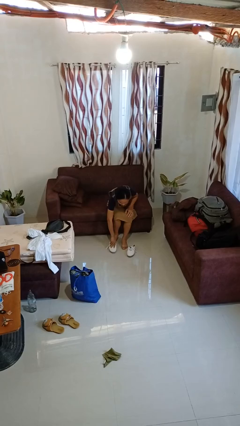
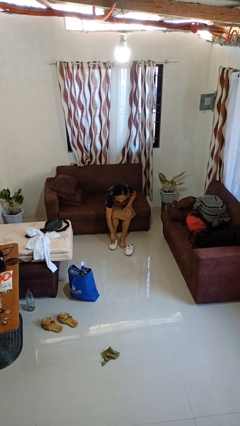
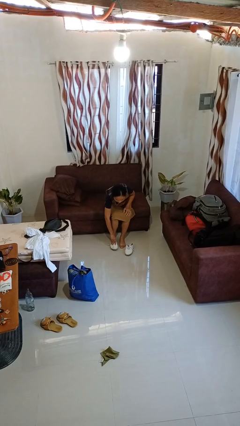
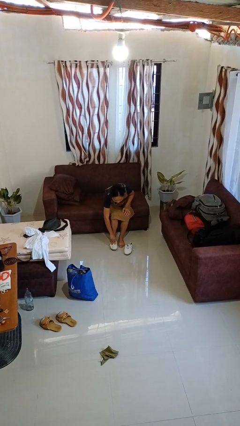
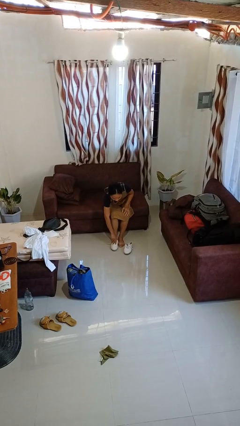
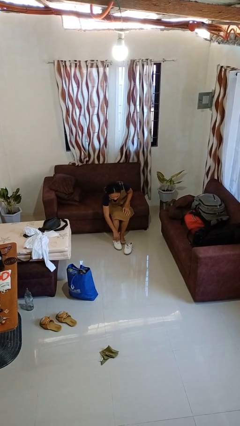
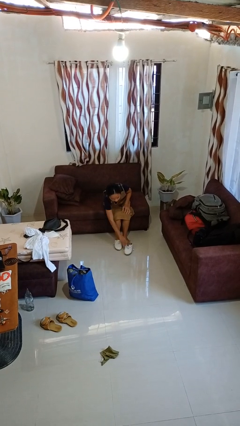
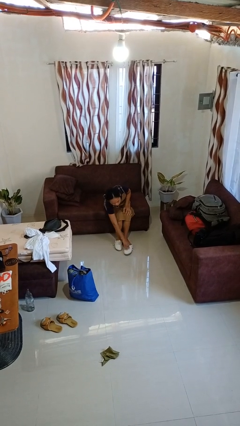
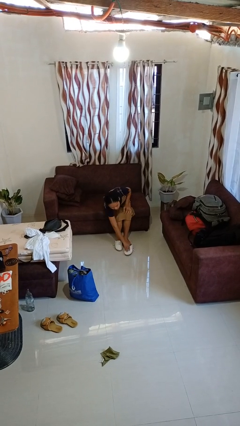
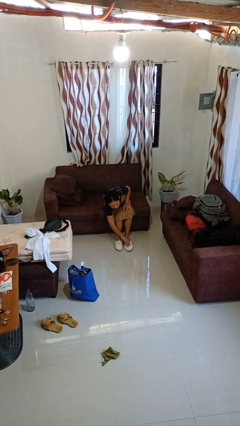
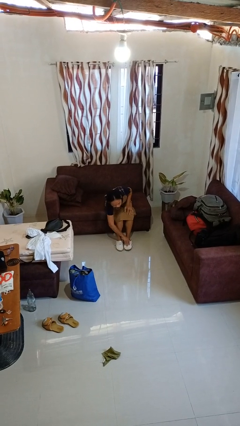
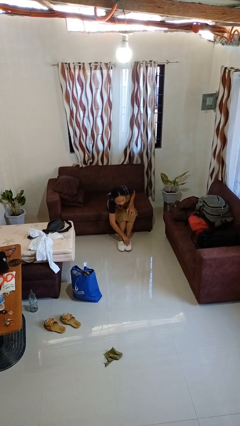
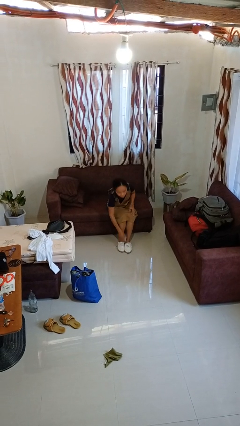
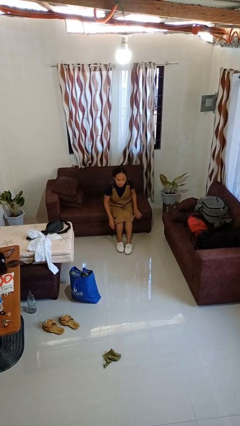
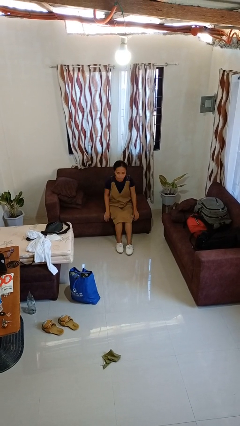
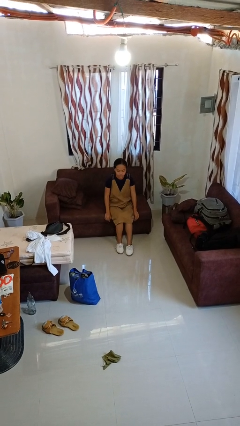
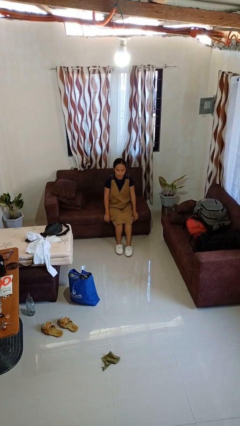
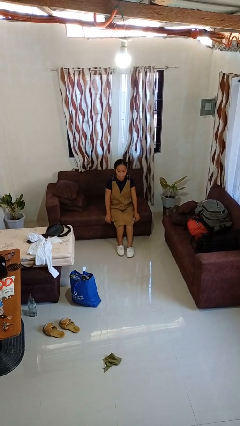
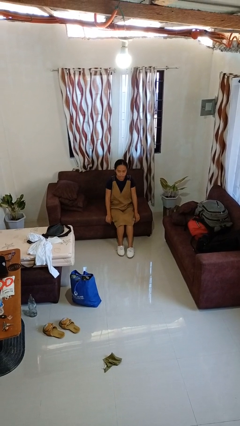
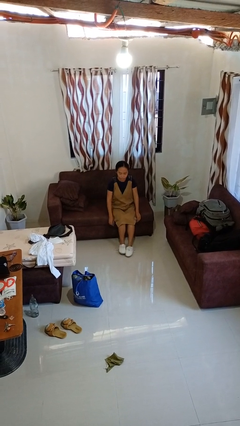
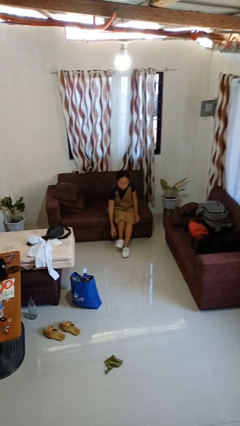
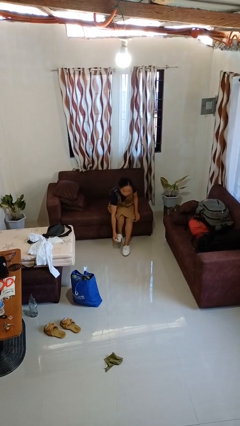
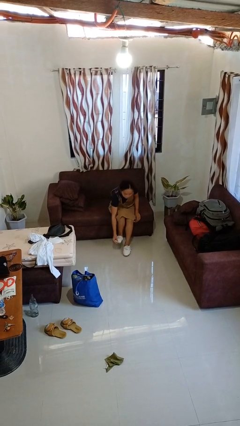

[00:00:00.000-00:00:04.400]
person puts on shoes

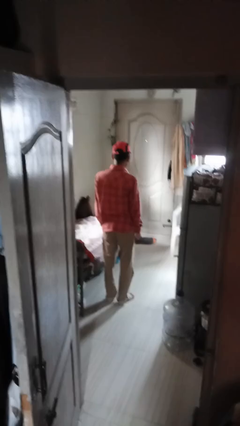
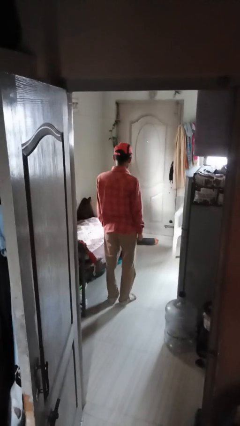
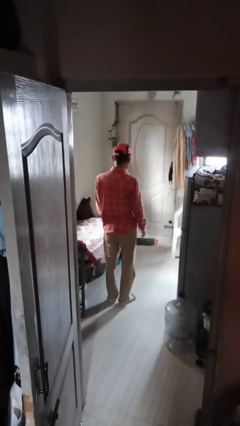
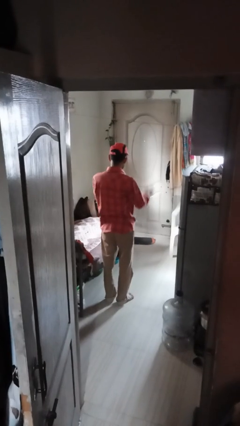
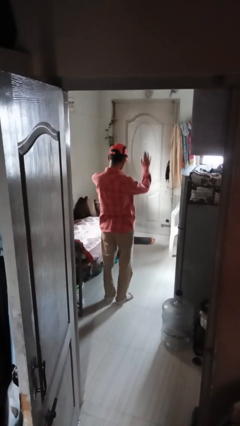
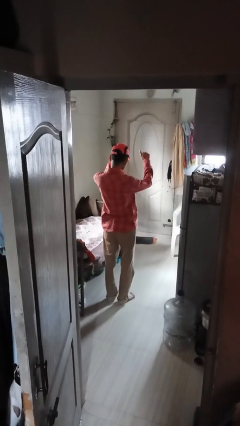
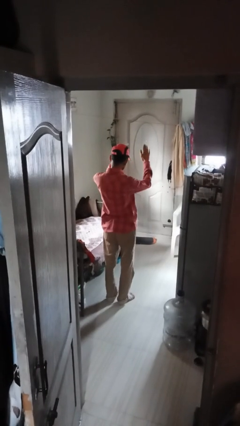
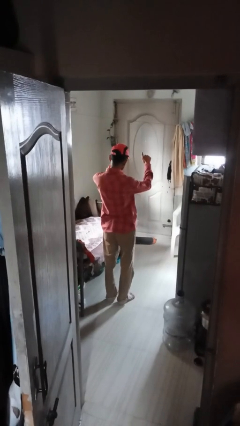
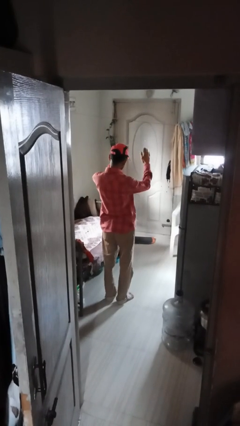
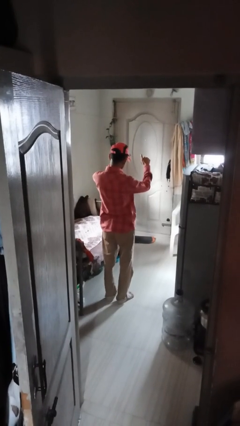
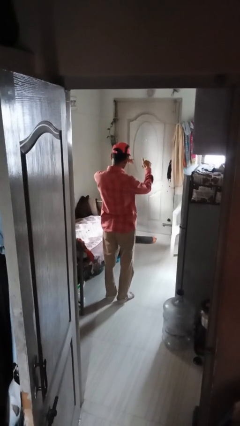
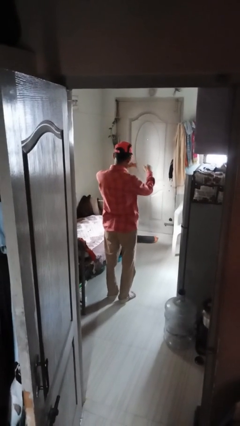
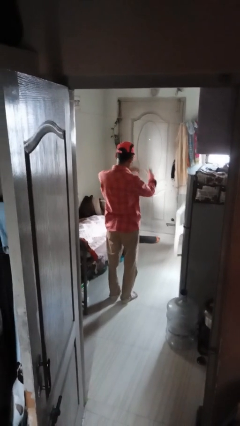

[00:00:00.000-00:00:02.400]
person gestures come here

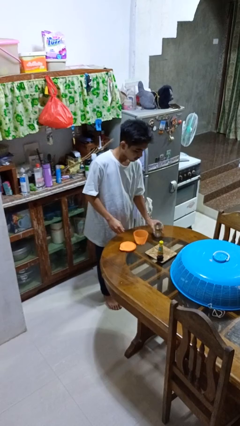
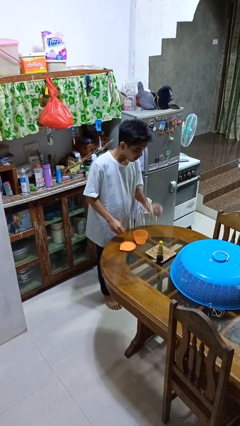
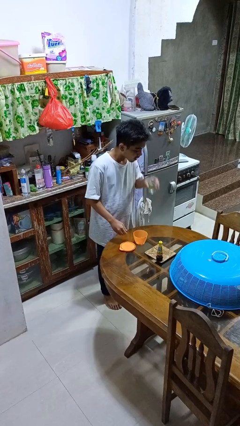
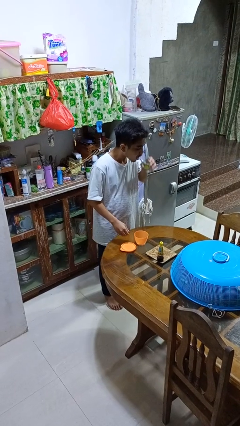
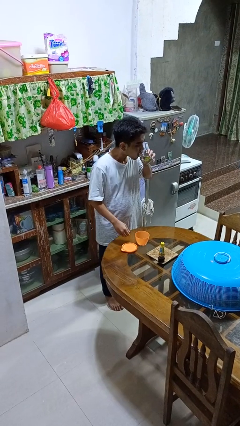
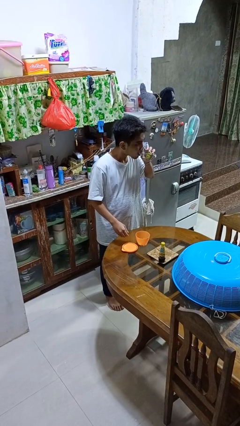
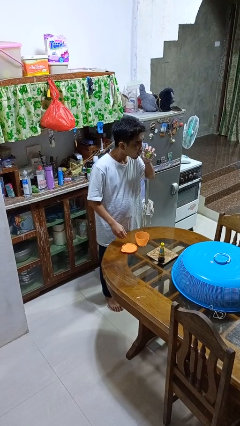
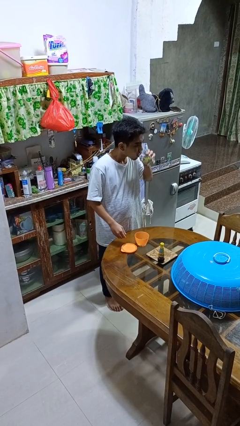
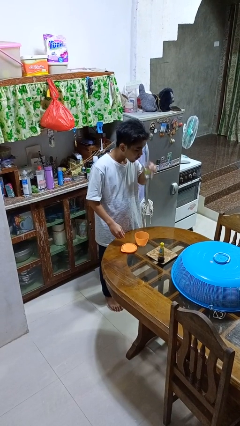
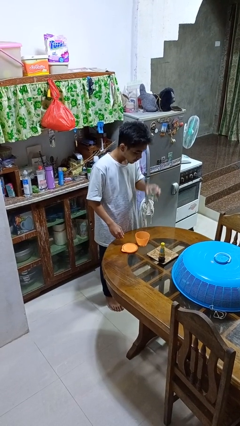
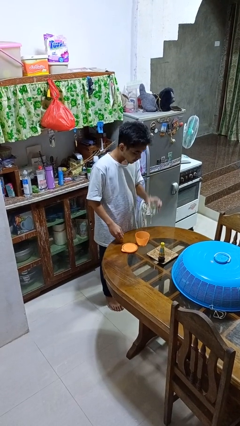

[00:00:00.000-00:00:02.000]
person drinks from cup

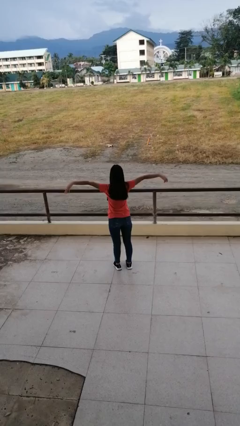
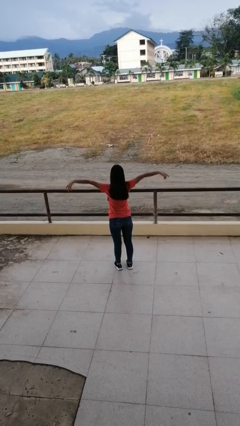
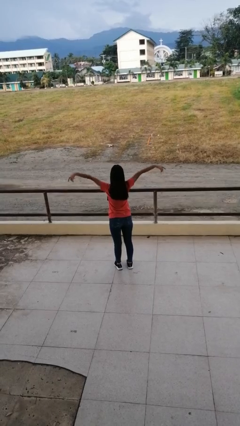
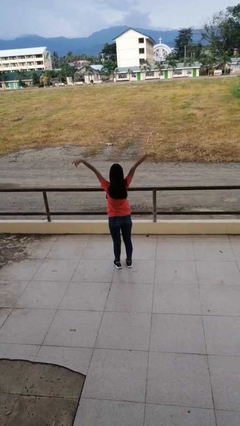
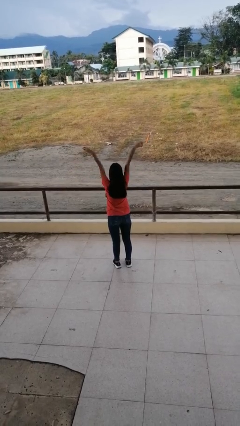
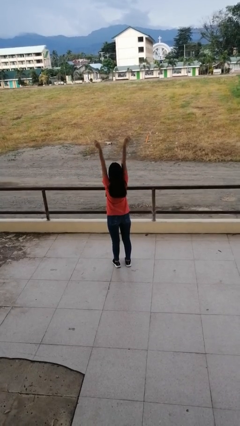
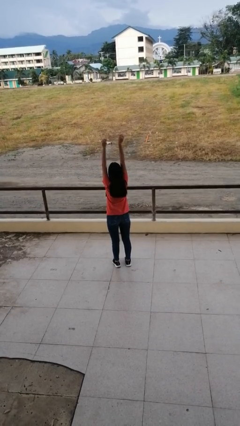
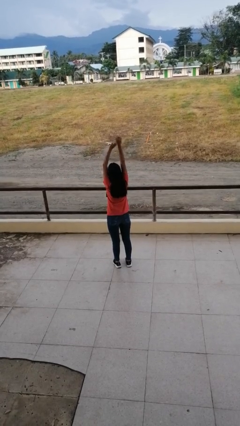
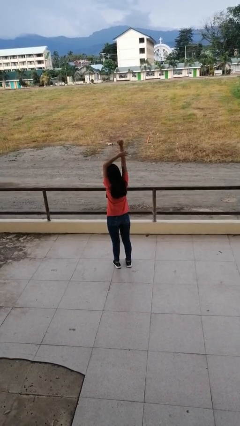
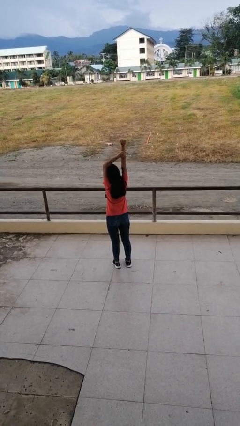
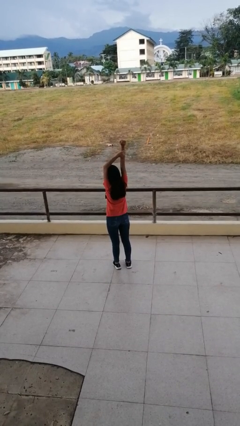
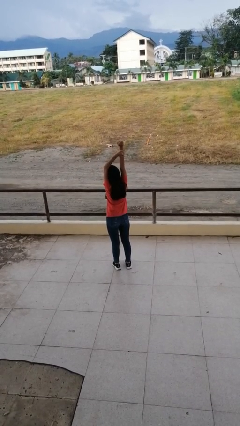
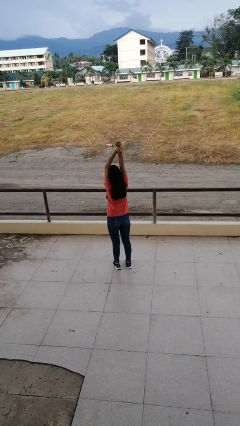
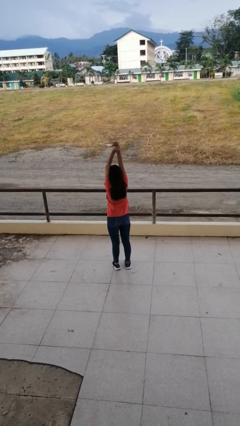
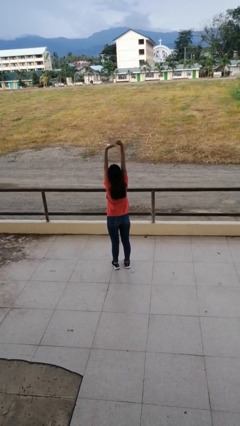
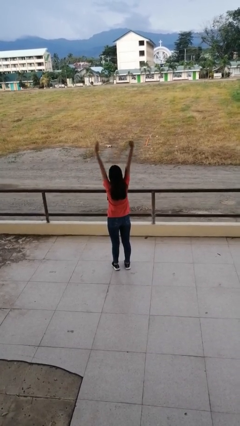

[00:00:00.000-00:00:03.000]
person stretches arms over head

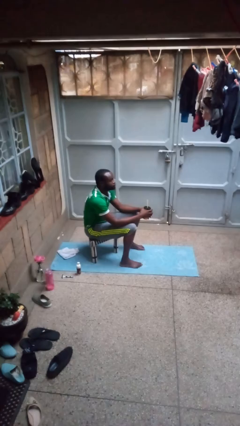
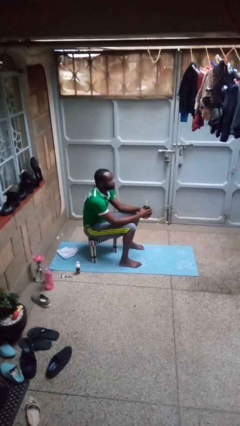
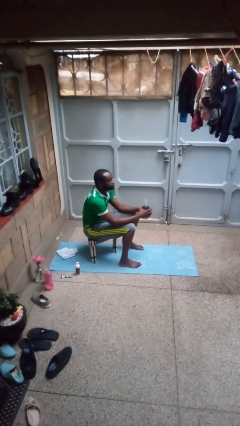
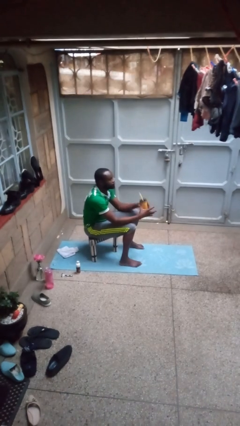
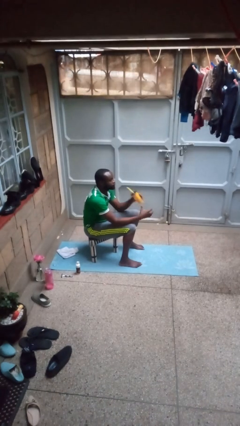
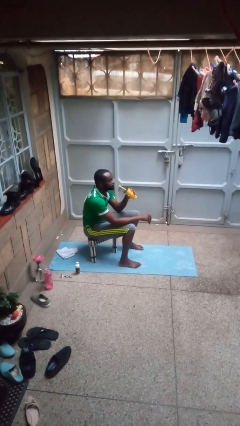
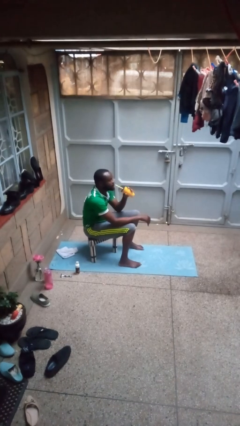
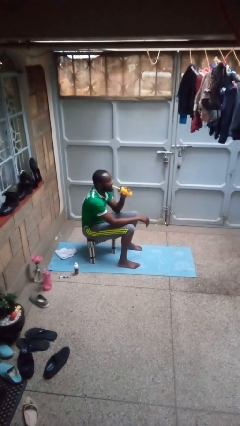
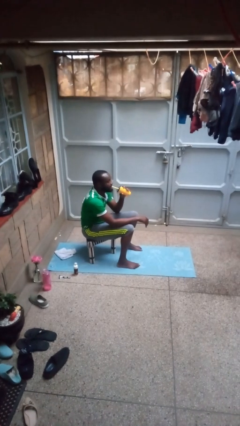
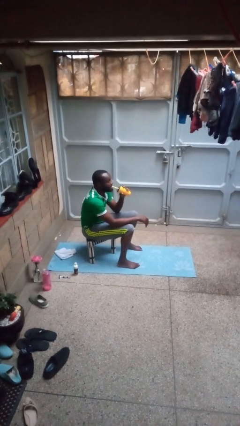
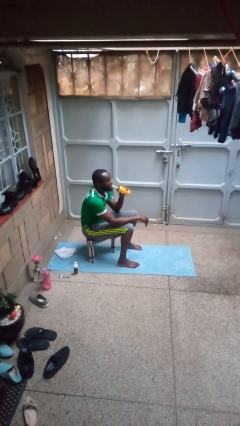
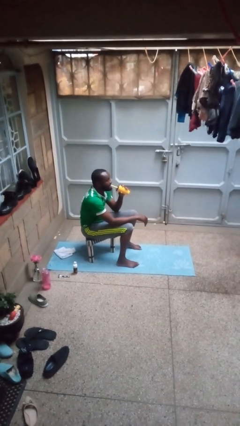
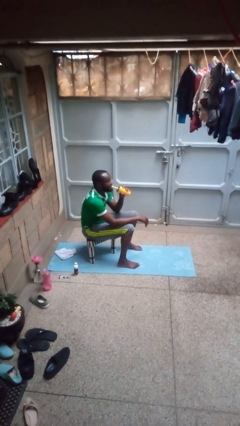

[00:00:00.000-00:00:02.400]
person drinks from straw

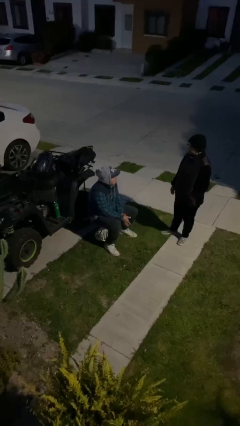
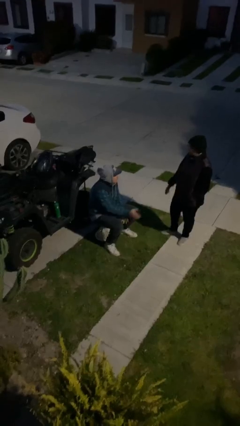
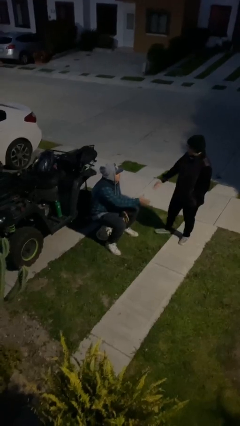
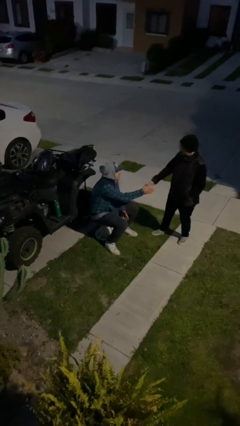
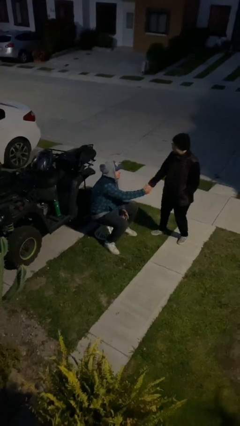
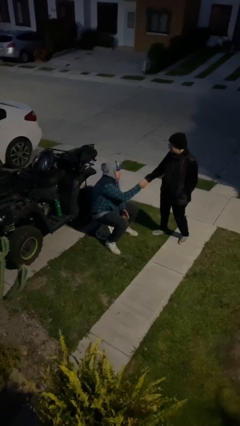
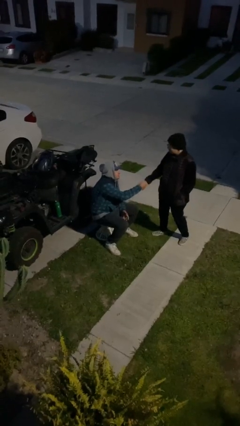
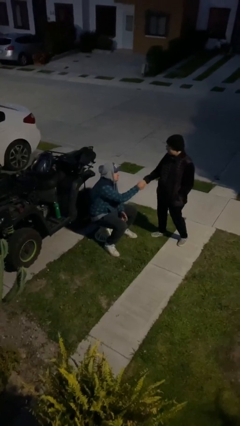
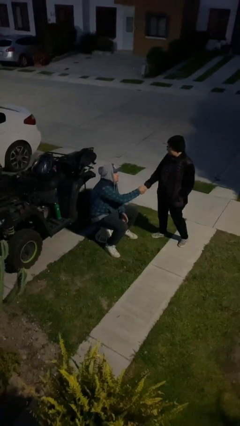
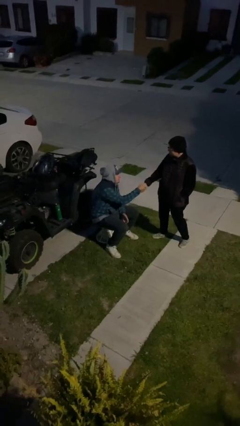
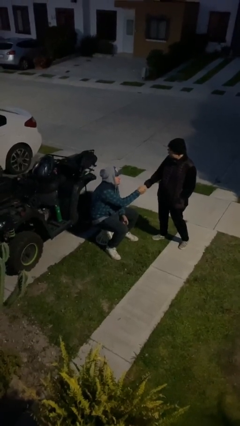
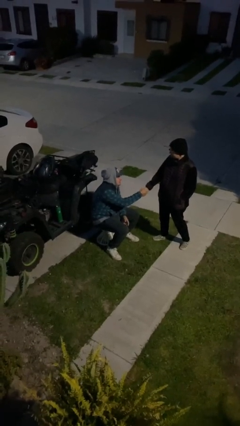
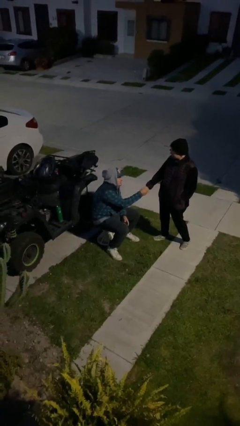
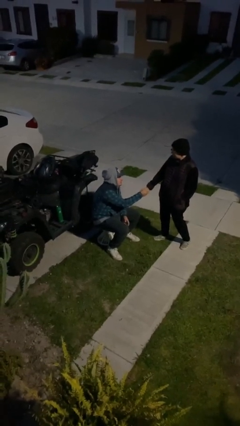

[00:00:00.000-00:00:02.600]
person shakes hand

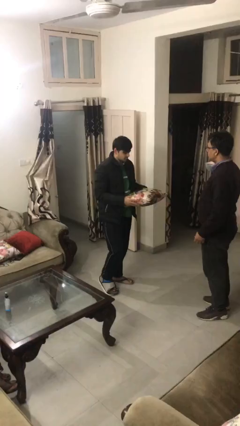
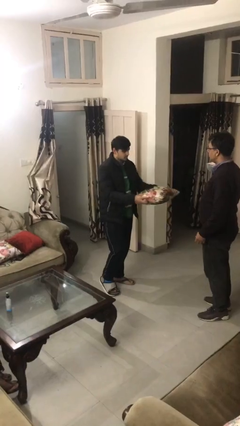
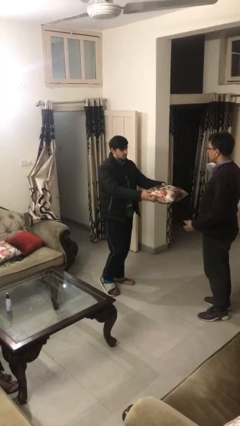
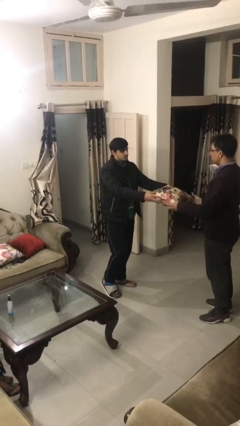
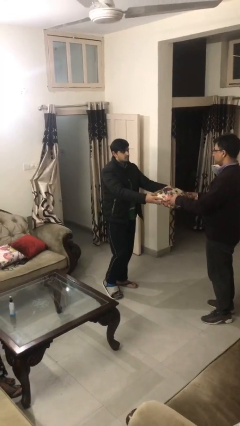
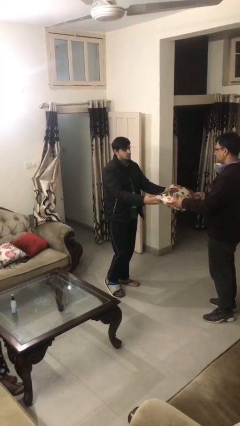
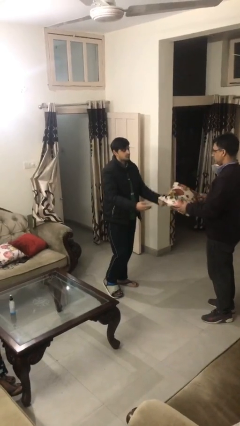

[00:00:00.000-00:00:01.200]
person transfers object to person
